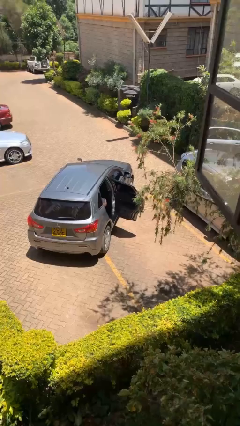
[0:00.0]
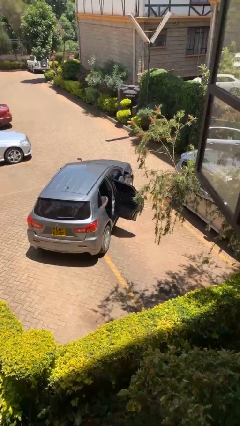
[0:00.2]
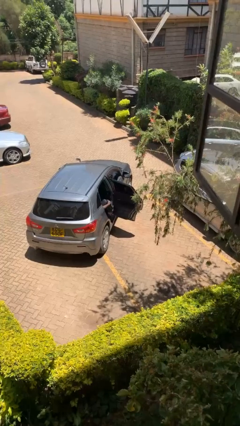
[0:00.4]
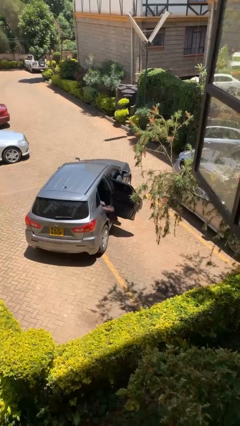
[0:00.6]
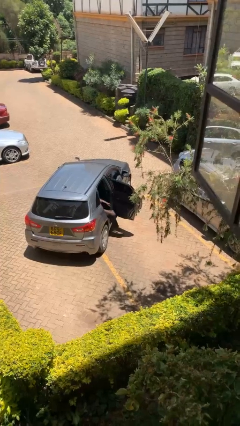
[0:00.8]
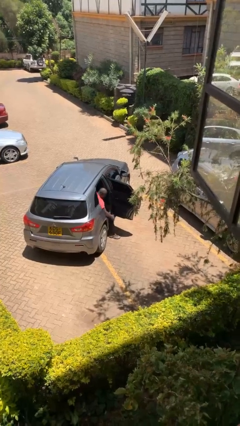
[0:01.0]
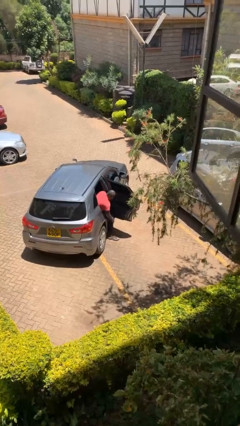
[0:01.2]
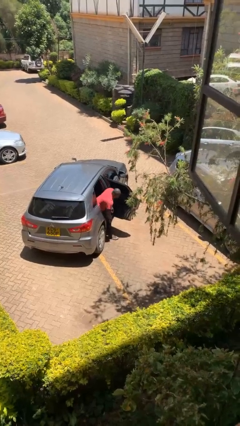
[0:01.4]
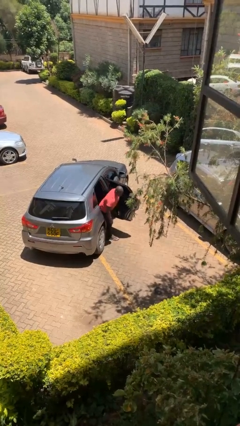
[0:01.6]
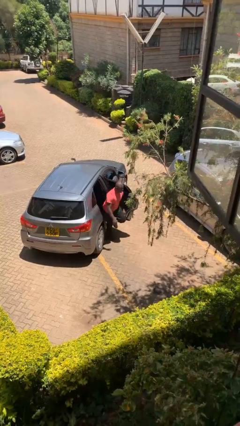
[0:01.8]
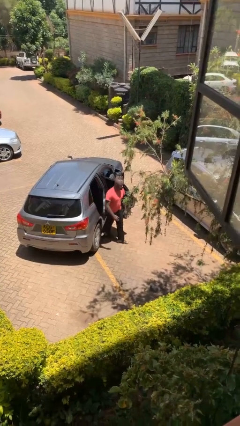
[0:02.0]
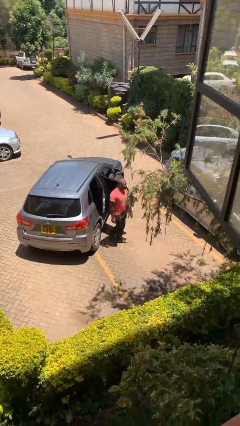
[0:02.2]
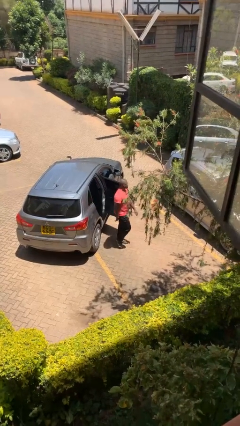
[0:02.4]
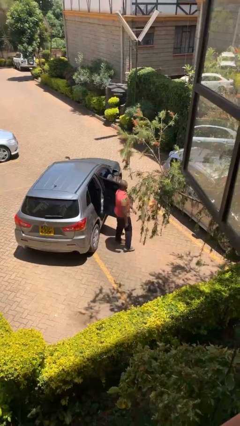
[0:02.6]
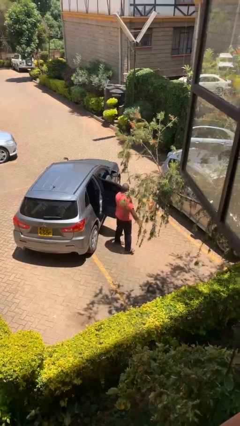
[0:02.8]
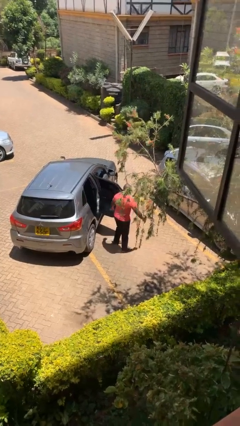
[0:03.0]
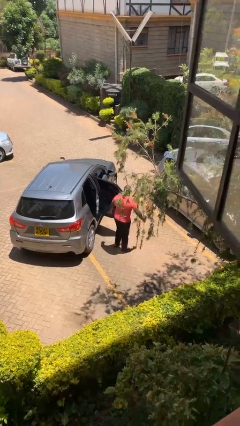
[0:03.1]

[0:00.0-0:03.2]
person exits car

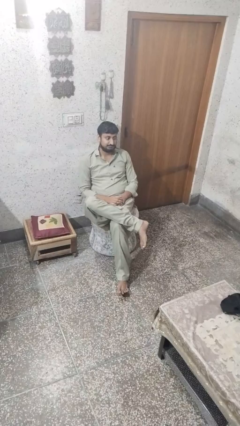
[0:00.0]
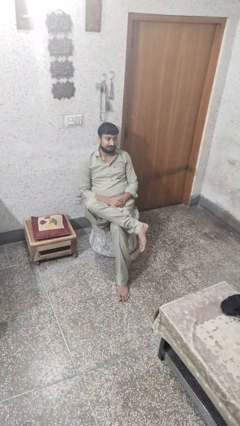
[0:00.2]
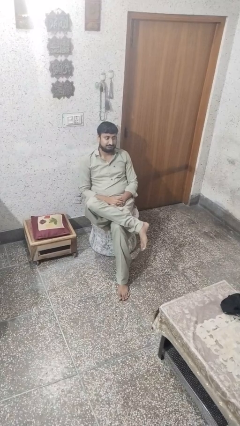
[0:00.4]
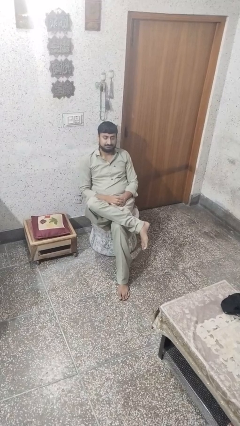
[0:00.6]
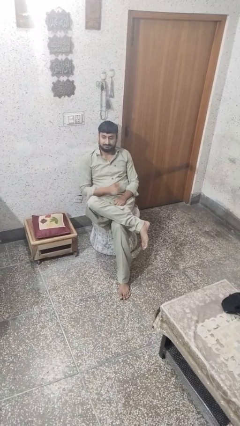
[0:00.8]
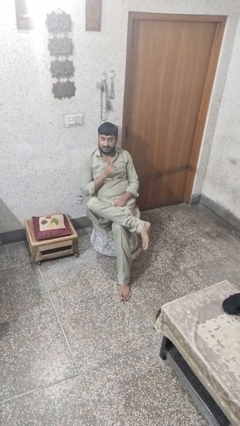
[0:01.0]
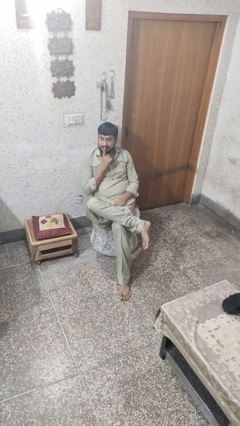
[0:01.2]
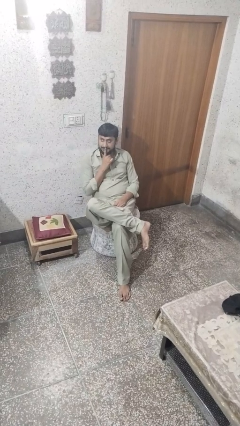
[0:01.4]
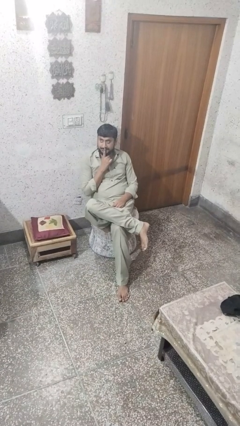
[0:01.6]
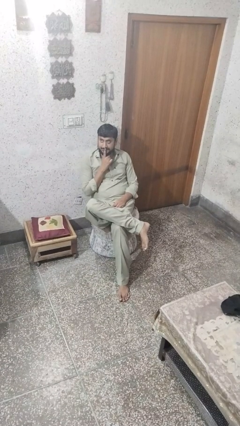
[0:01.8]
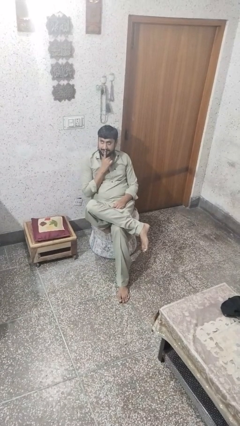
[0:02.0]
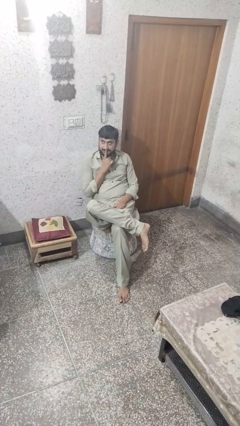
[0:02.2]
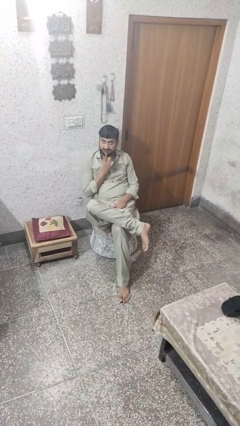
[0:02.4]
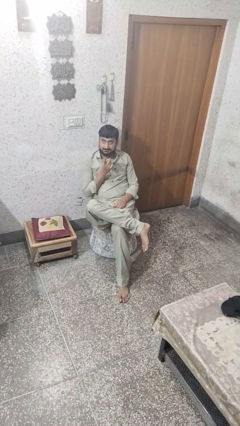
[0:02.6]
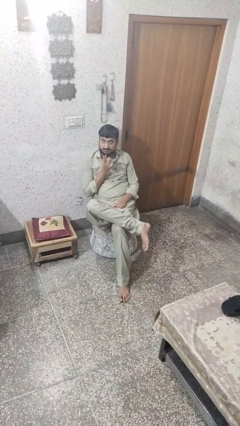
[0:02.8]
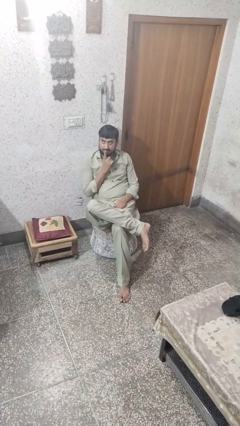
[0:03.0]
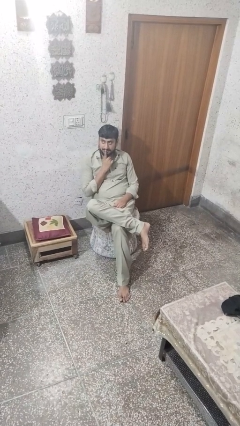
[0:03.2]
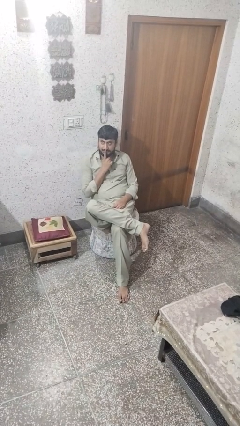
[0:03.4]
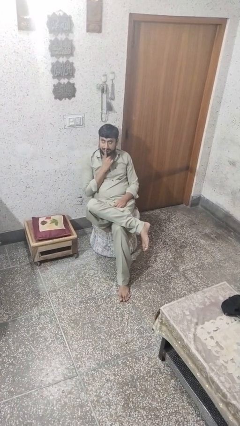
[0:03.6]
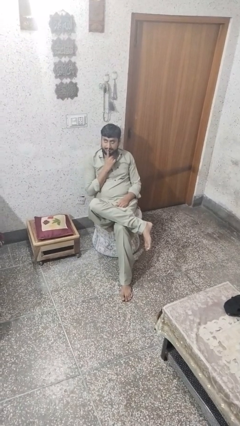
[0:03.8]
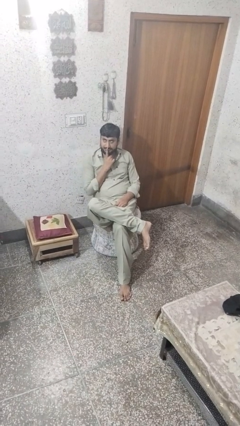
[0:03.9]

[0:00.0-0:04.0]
person gestures be quiet

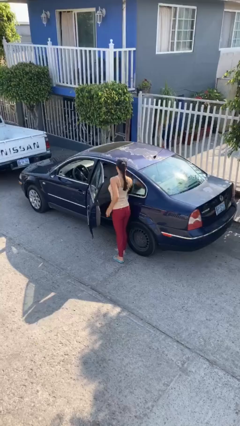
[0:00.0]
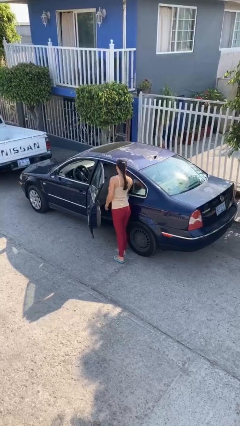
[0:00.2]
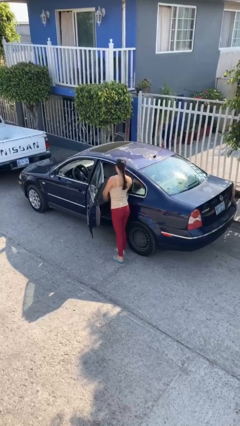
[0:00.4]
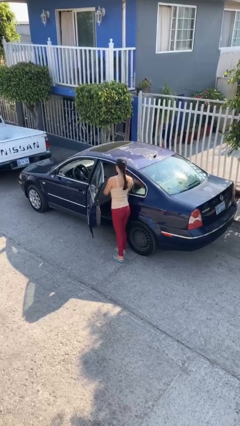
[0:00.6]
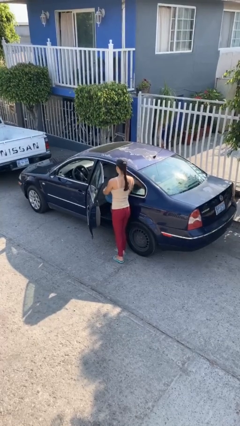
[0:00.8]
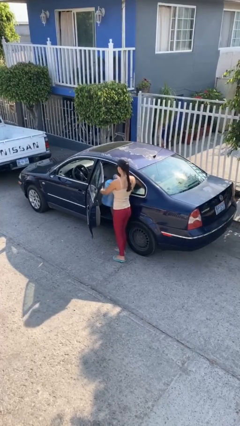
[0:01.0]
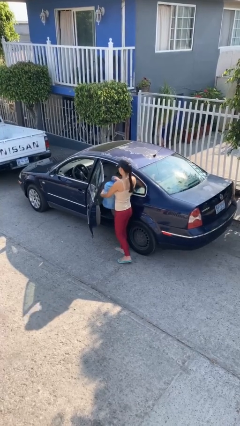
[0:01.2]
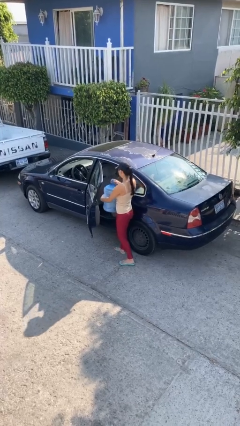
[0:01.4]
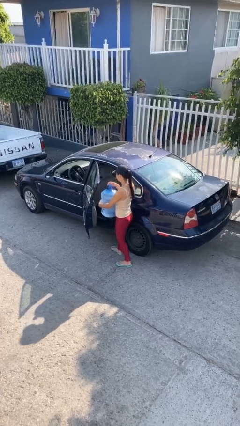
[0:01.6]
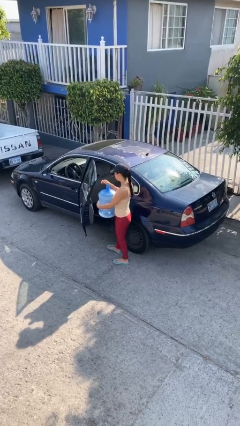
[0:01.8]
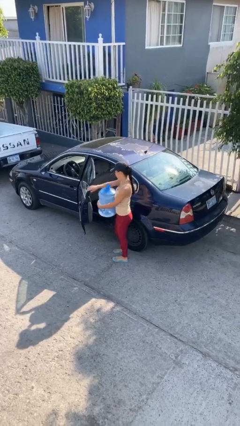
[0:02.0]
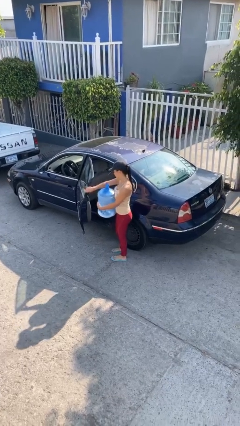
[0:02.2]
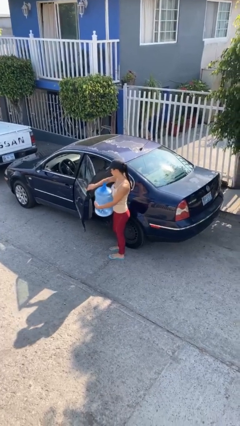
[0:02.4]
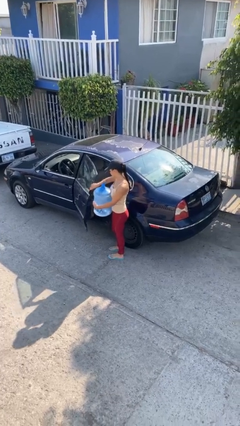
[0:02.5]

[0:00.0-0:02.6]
person unloads car

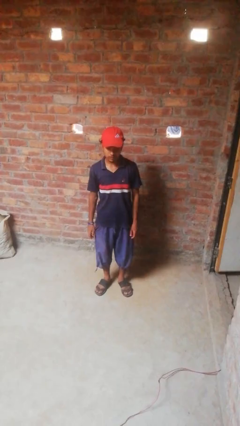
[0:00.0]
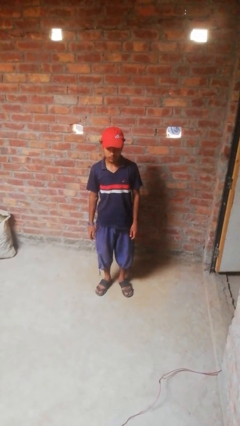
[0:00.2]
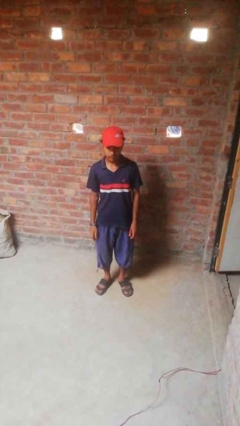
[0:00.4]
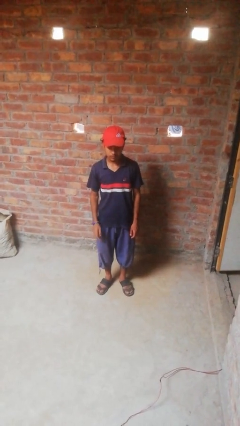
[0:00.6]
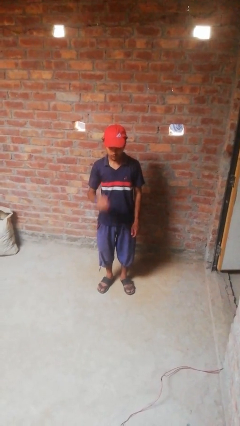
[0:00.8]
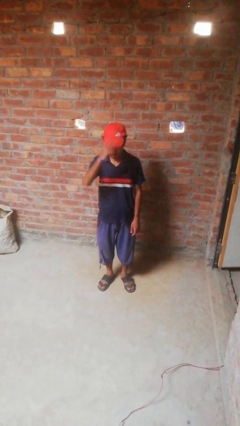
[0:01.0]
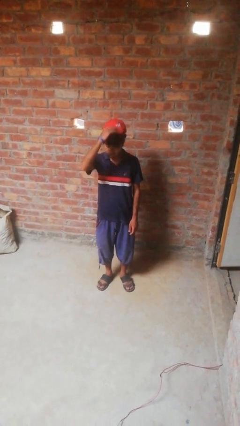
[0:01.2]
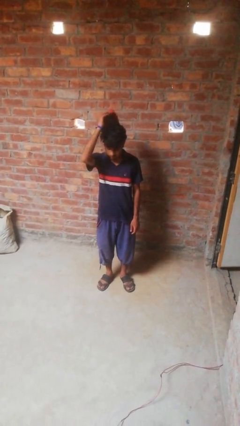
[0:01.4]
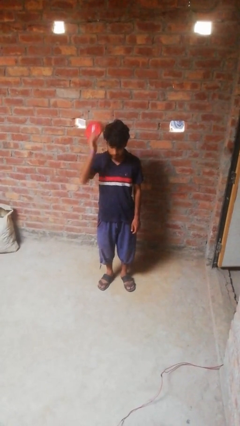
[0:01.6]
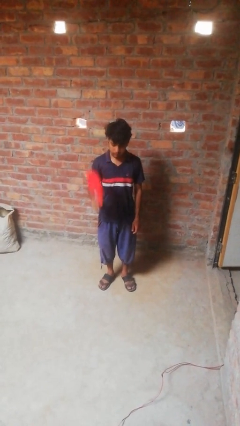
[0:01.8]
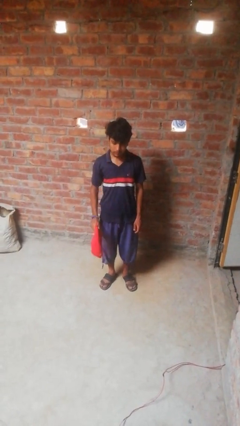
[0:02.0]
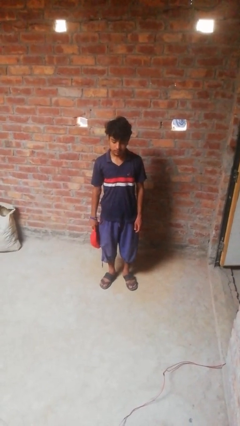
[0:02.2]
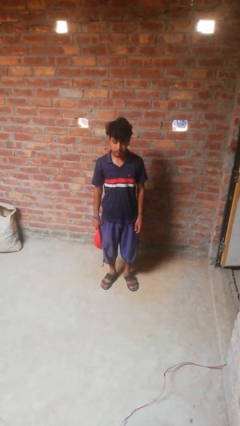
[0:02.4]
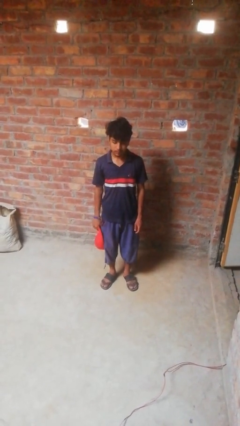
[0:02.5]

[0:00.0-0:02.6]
person takes off hat

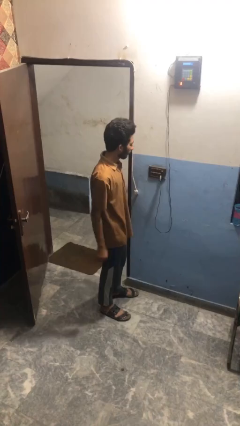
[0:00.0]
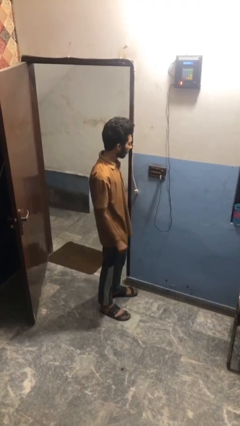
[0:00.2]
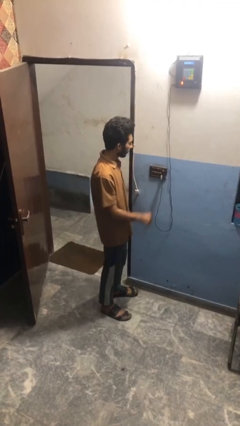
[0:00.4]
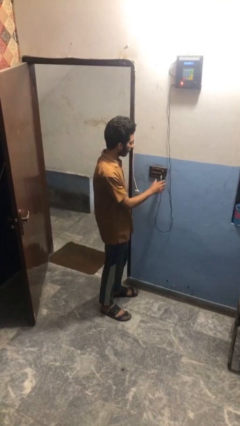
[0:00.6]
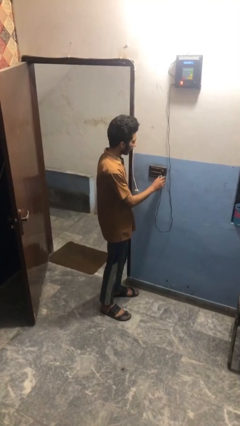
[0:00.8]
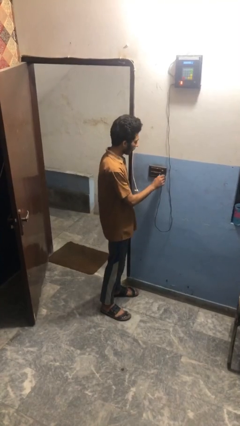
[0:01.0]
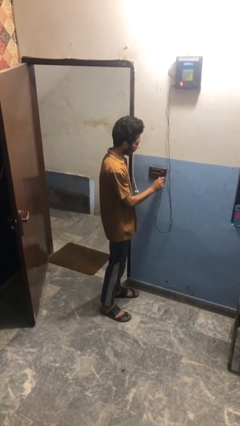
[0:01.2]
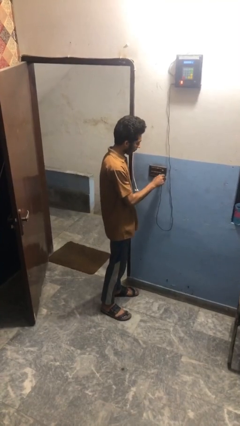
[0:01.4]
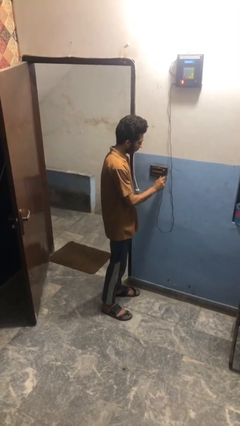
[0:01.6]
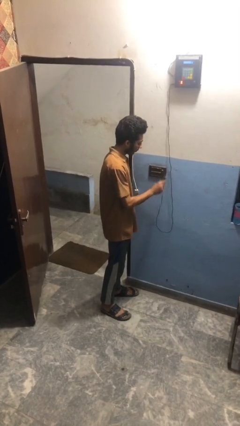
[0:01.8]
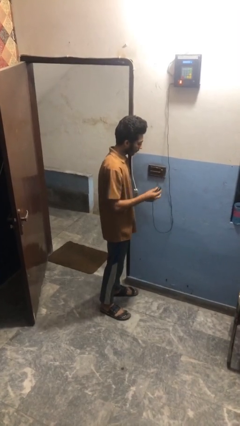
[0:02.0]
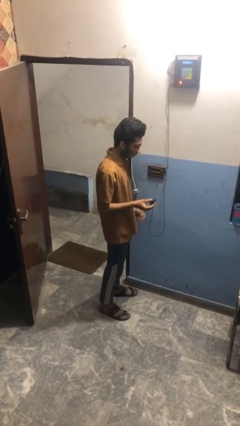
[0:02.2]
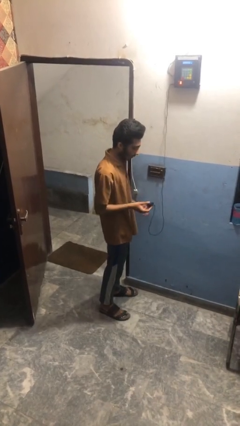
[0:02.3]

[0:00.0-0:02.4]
person unplugs from electrical socket

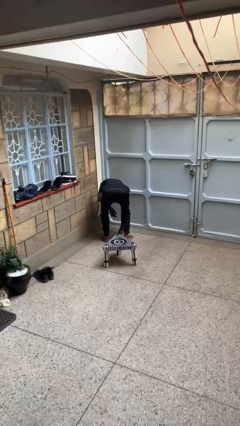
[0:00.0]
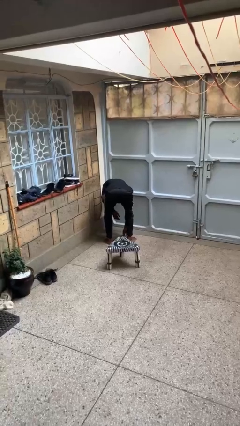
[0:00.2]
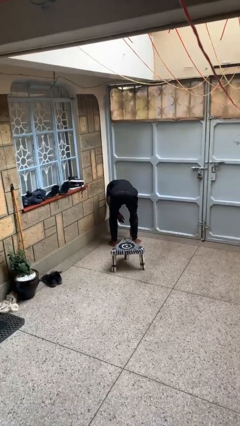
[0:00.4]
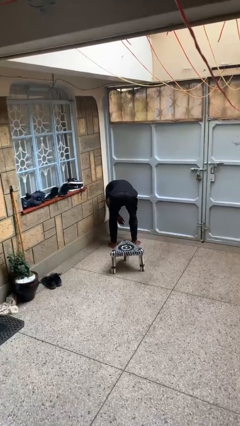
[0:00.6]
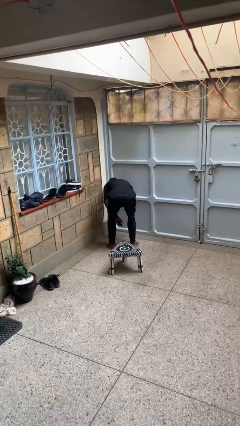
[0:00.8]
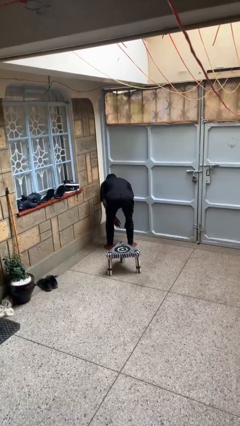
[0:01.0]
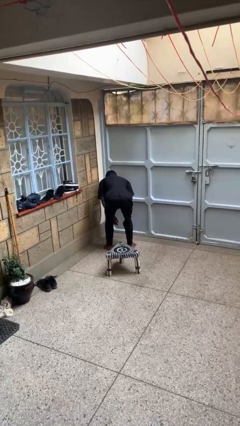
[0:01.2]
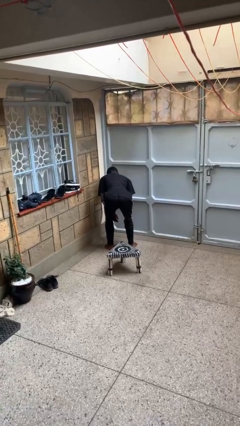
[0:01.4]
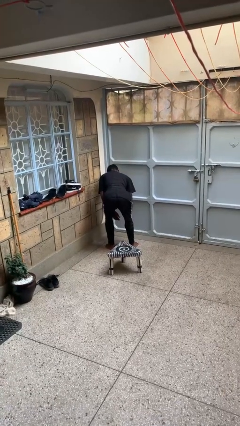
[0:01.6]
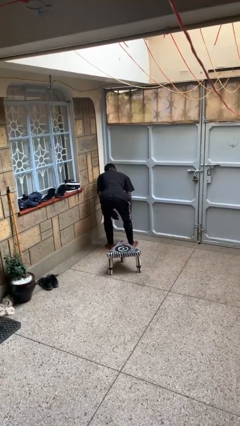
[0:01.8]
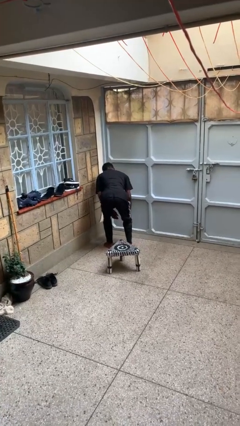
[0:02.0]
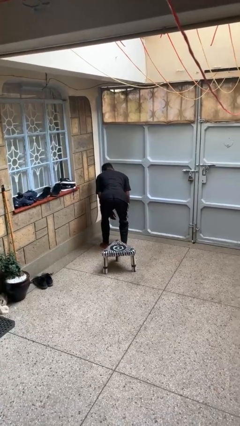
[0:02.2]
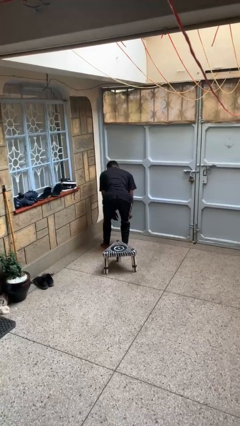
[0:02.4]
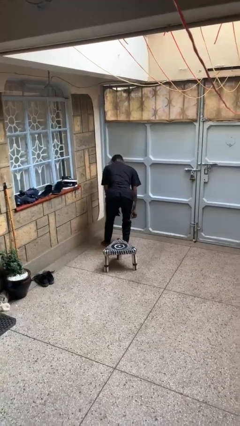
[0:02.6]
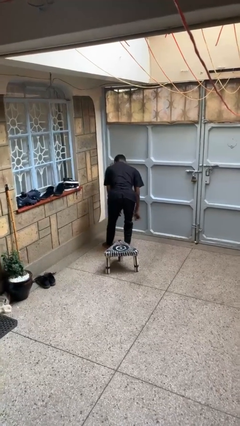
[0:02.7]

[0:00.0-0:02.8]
person stands up from floor
